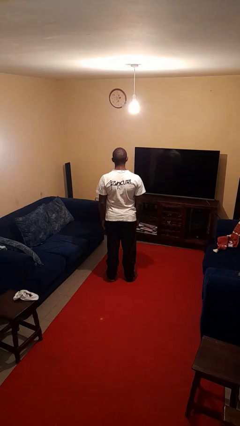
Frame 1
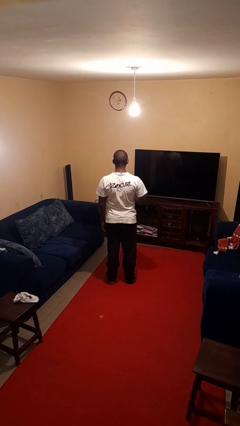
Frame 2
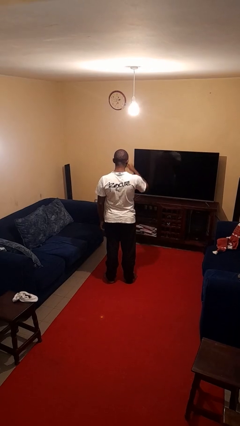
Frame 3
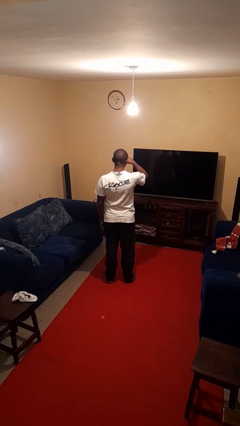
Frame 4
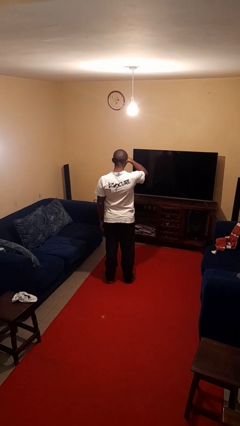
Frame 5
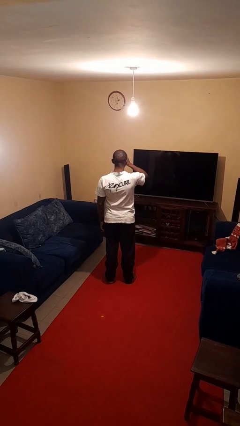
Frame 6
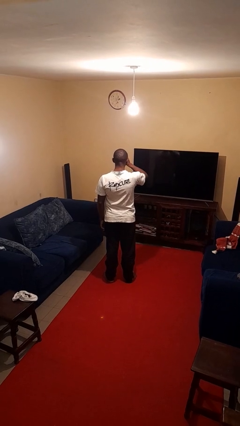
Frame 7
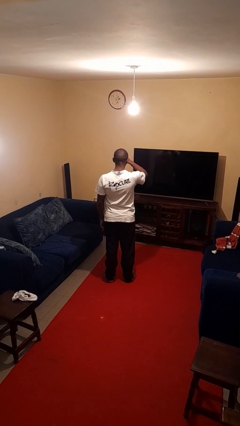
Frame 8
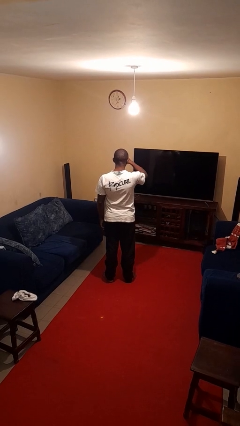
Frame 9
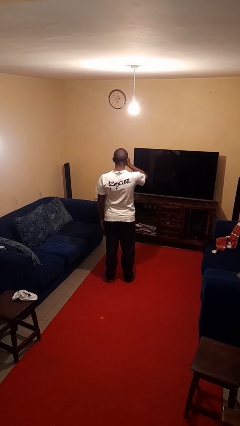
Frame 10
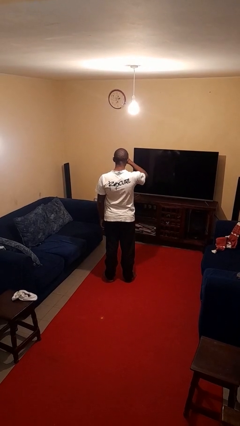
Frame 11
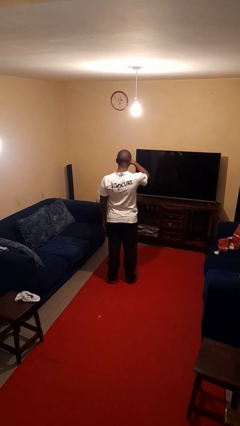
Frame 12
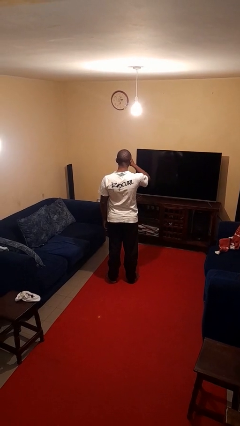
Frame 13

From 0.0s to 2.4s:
person rubs eyes

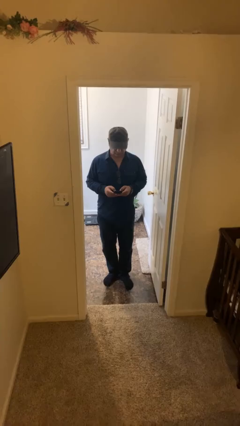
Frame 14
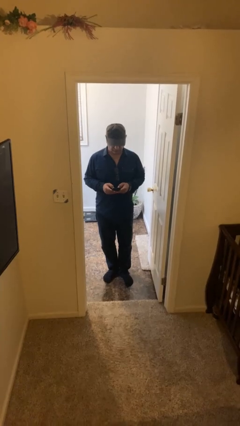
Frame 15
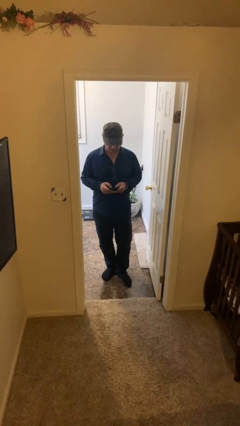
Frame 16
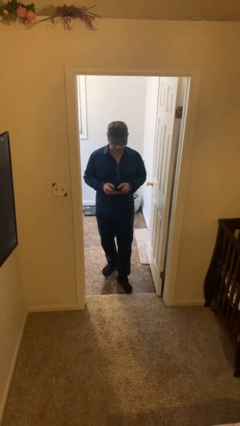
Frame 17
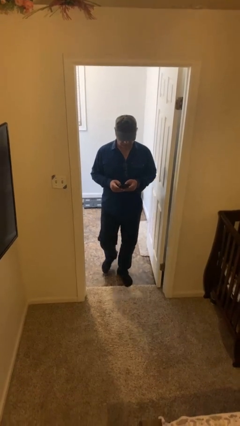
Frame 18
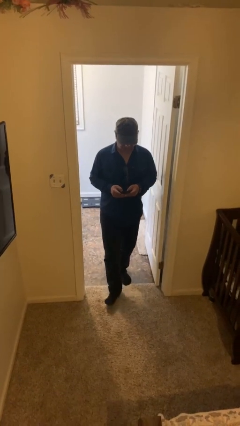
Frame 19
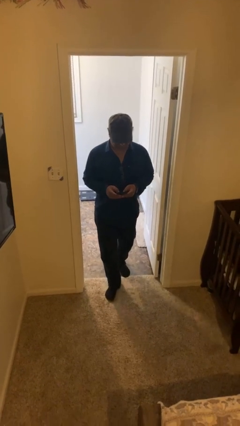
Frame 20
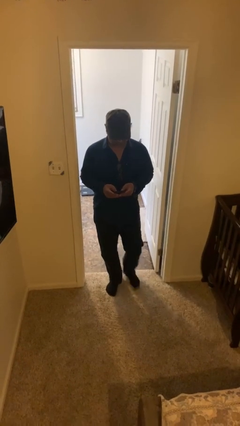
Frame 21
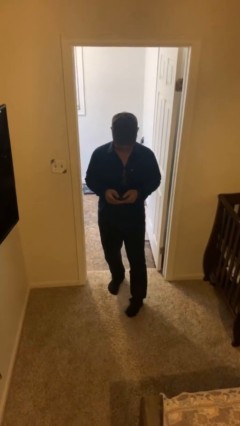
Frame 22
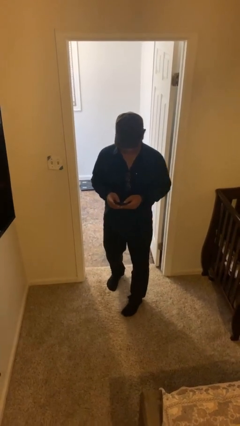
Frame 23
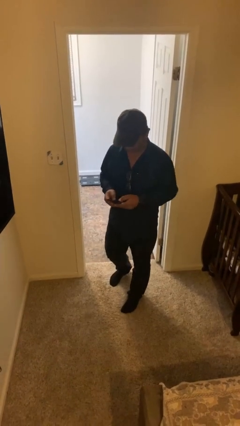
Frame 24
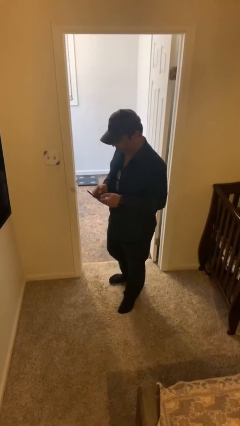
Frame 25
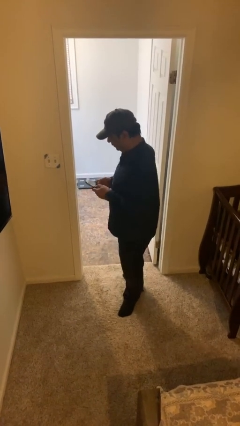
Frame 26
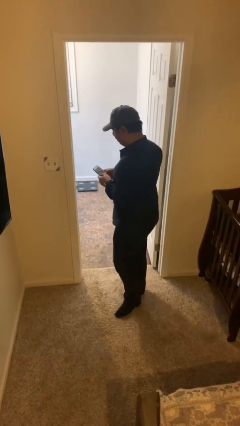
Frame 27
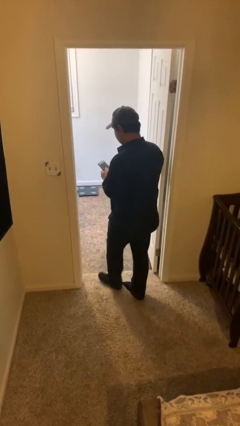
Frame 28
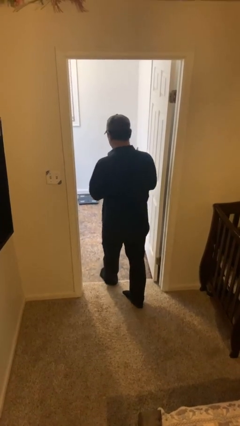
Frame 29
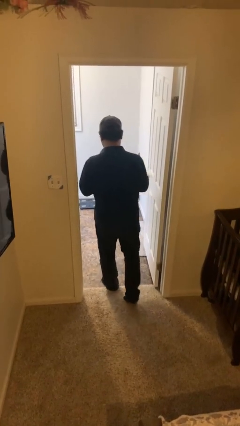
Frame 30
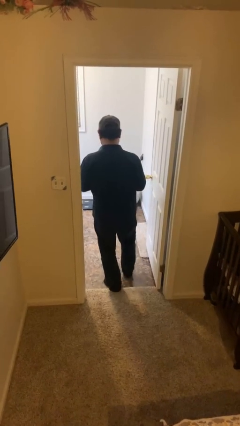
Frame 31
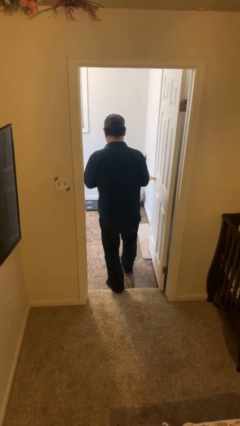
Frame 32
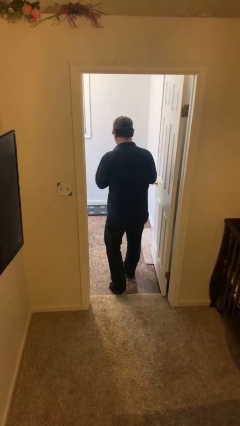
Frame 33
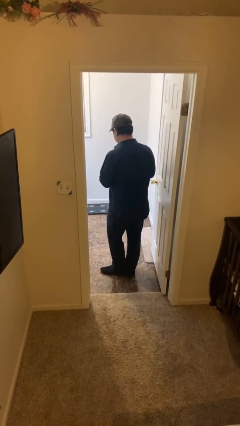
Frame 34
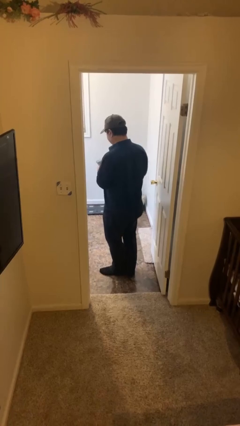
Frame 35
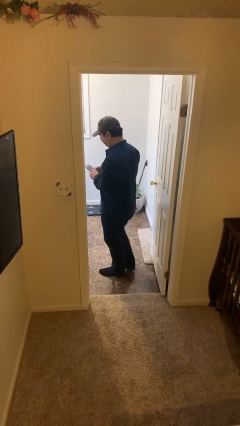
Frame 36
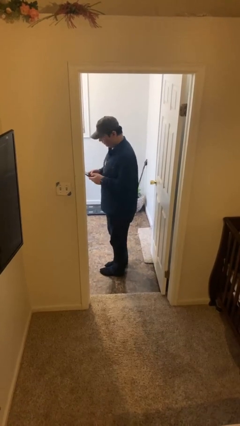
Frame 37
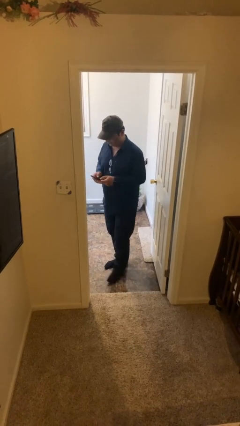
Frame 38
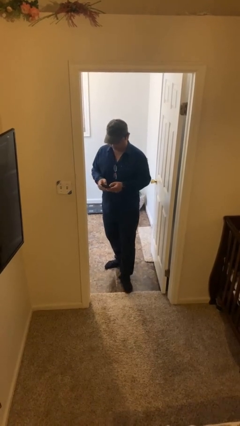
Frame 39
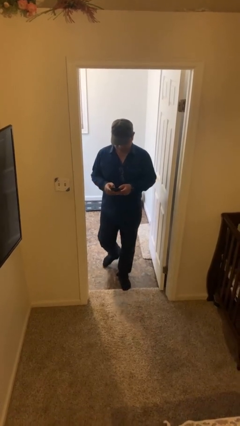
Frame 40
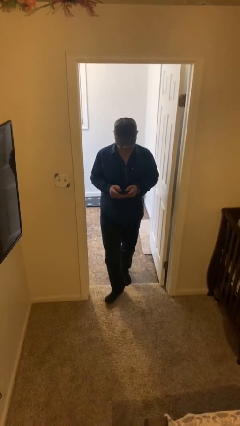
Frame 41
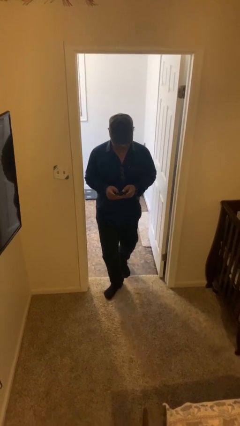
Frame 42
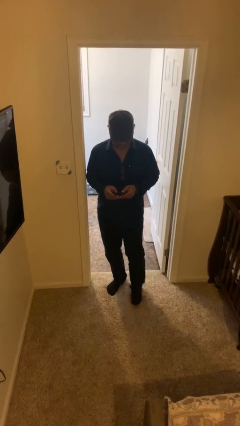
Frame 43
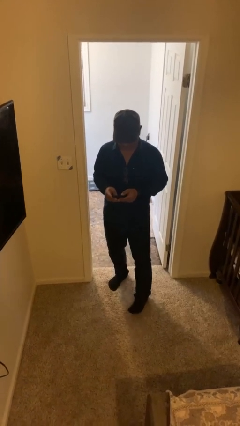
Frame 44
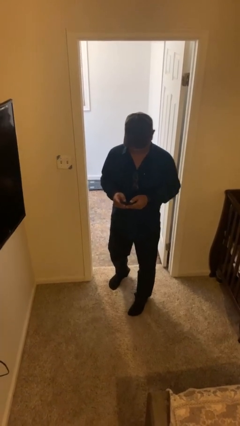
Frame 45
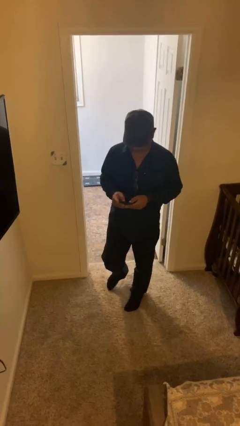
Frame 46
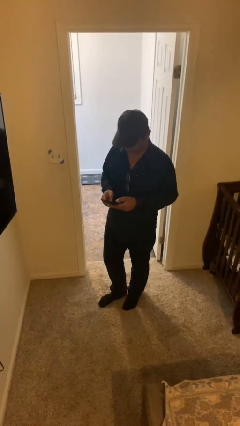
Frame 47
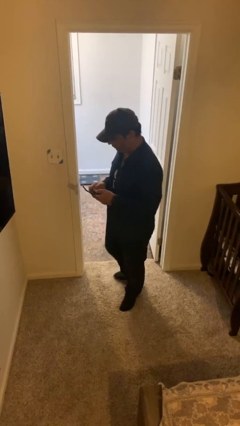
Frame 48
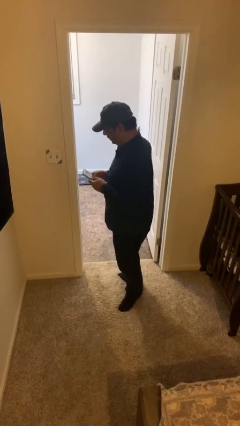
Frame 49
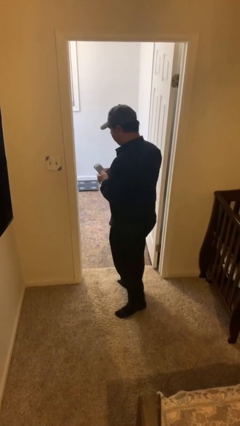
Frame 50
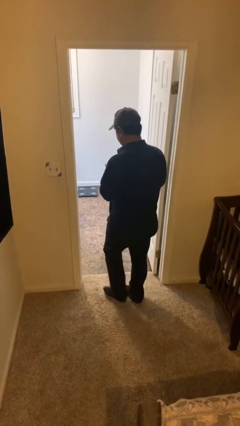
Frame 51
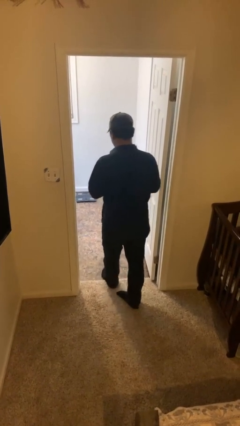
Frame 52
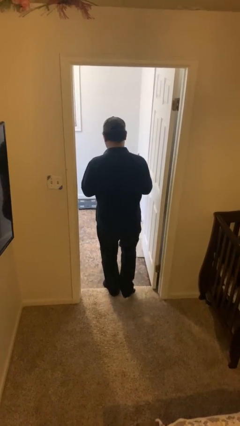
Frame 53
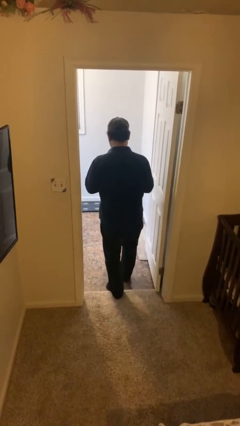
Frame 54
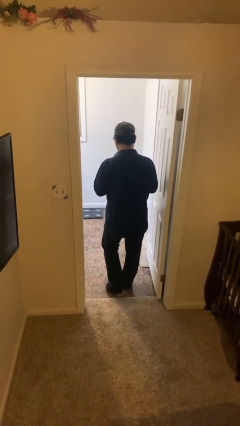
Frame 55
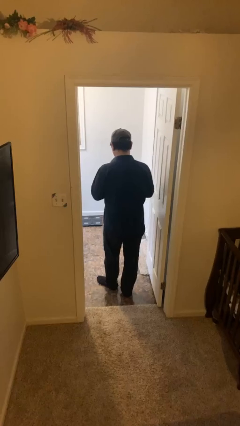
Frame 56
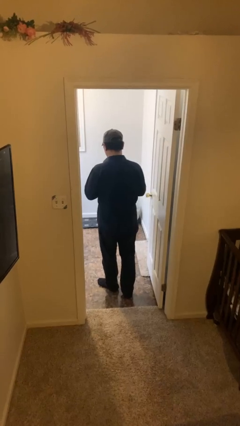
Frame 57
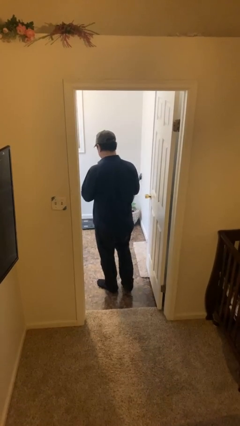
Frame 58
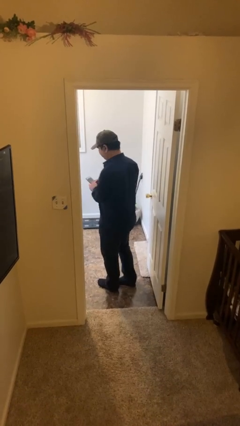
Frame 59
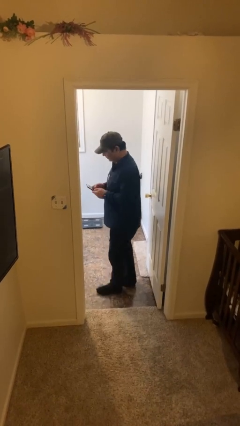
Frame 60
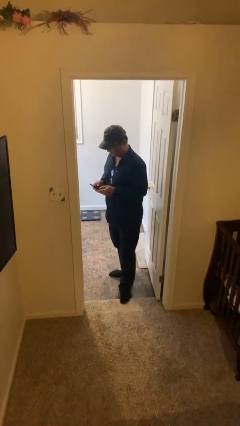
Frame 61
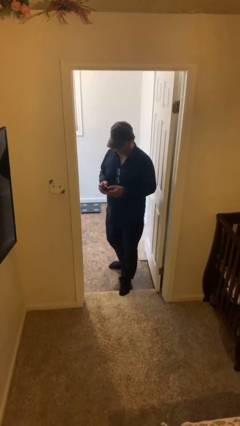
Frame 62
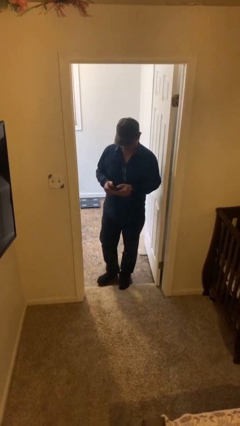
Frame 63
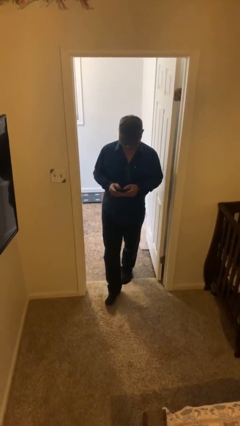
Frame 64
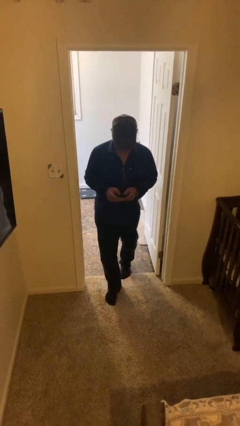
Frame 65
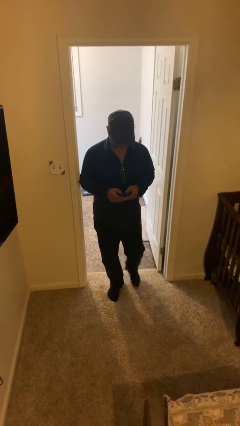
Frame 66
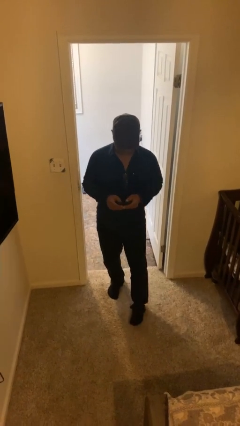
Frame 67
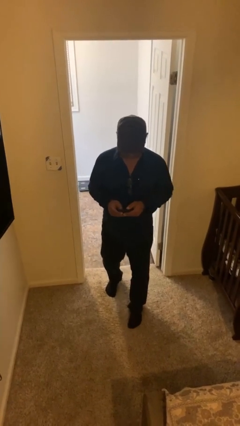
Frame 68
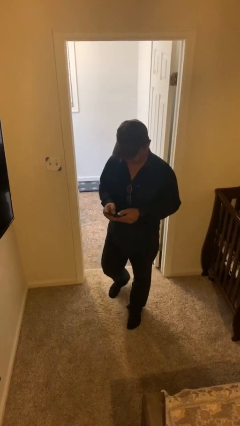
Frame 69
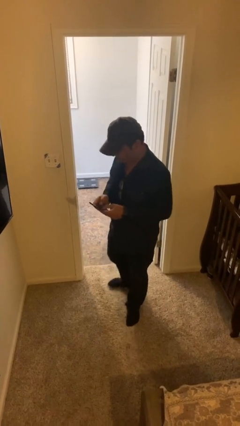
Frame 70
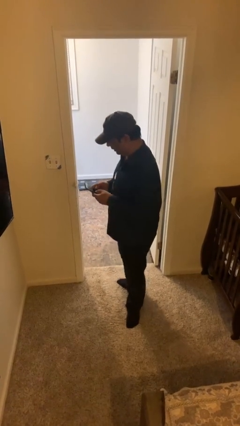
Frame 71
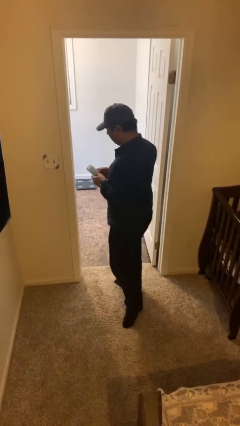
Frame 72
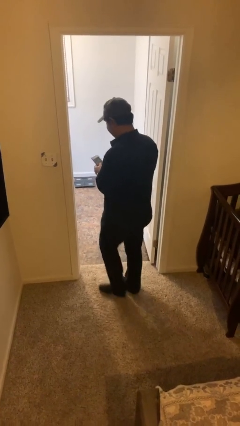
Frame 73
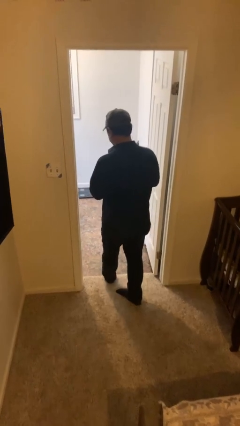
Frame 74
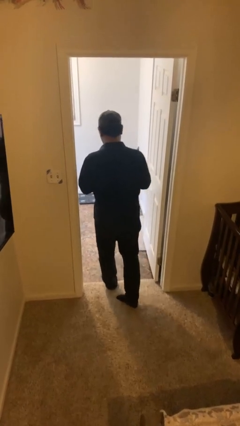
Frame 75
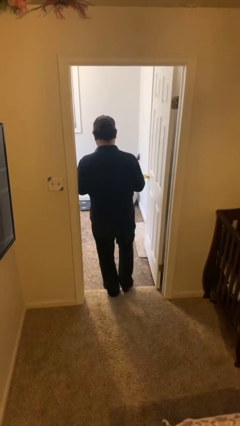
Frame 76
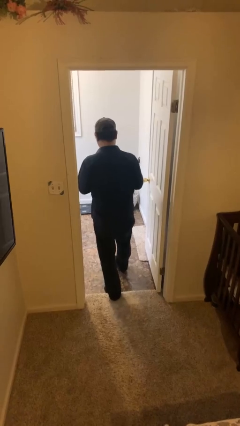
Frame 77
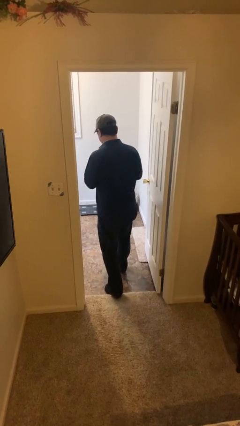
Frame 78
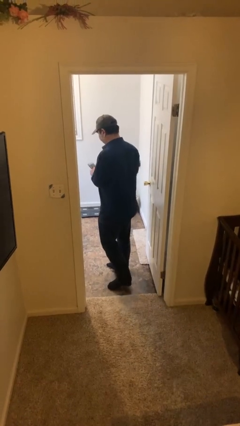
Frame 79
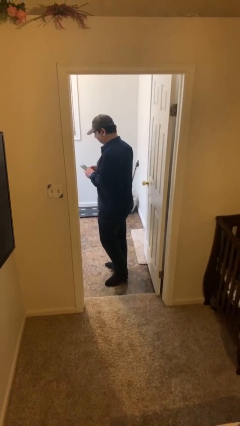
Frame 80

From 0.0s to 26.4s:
person texts on phone

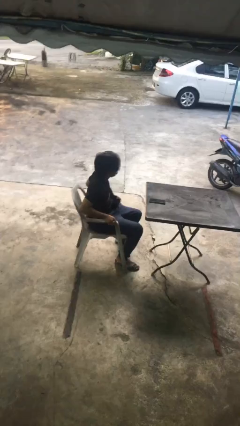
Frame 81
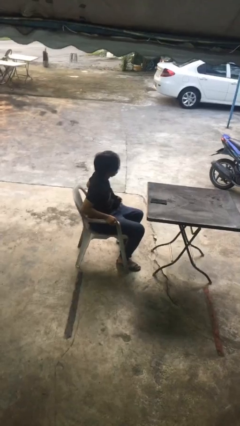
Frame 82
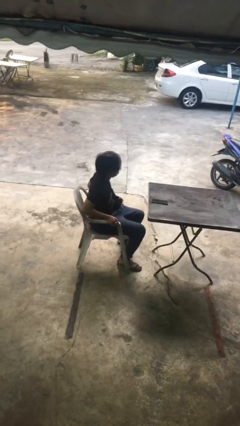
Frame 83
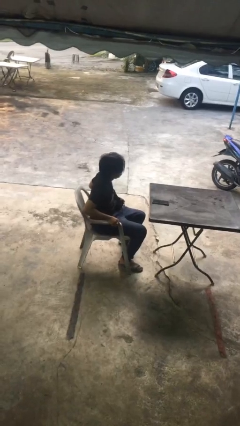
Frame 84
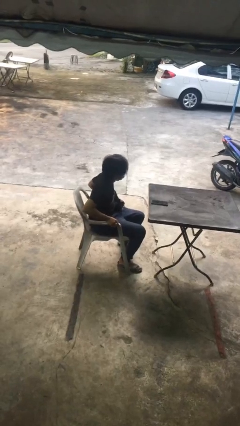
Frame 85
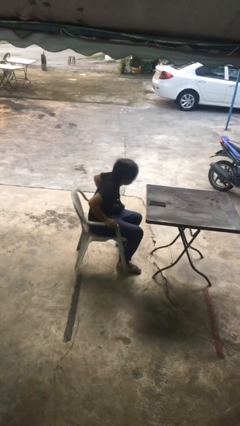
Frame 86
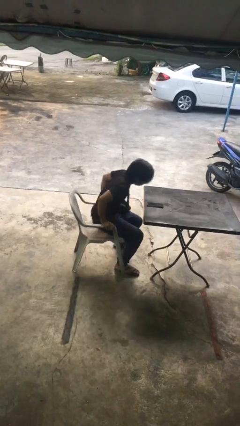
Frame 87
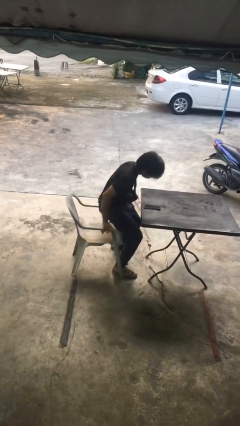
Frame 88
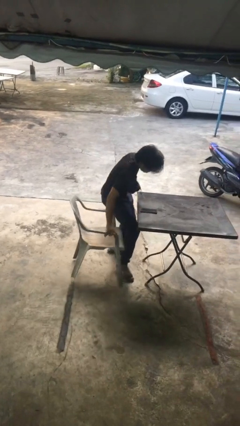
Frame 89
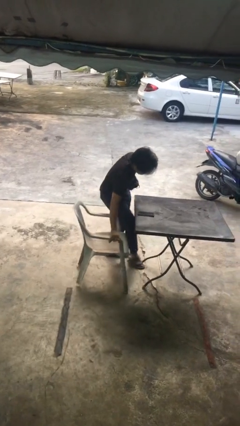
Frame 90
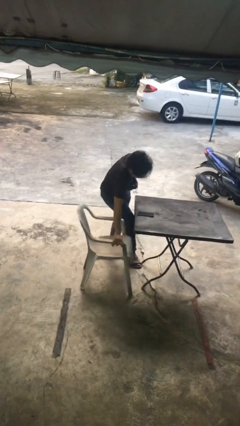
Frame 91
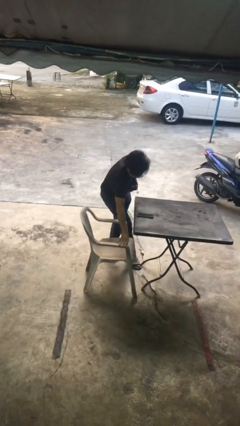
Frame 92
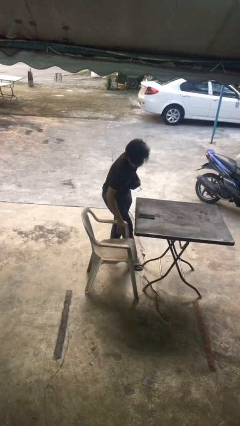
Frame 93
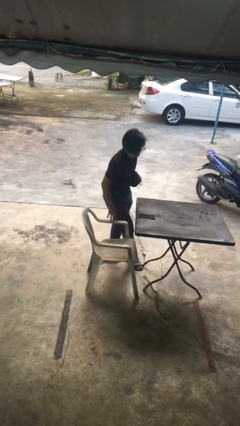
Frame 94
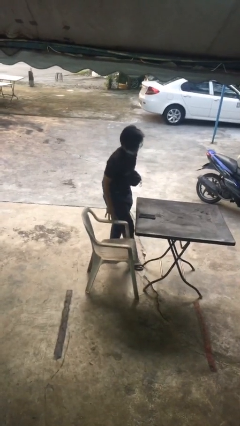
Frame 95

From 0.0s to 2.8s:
person stands up
